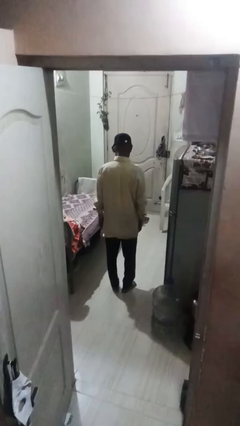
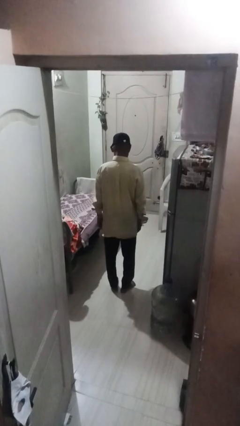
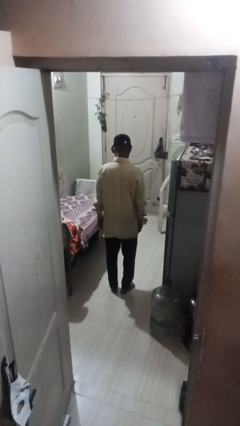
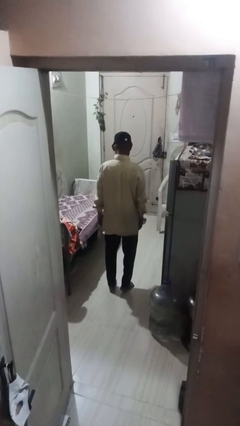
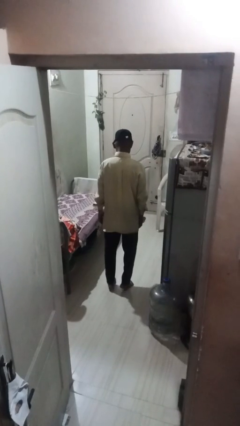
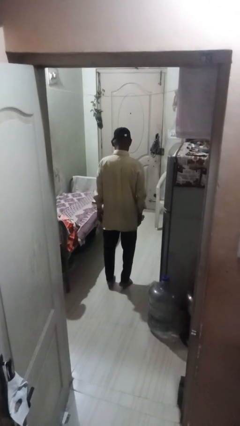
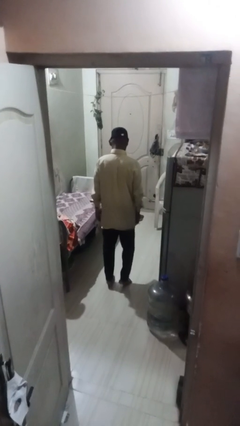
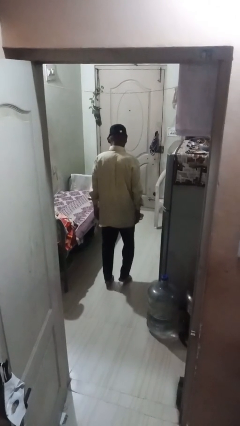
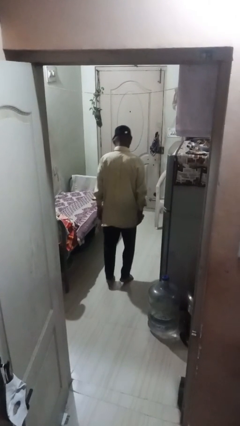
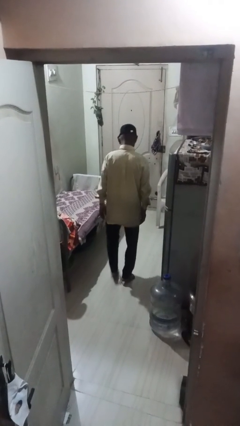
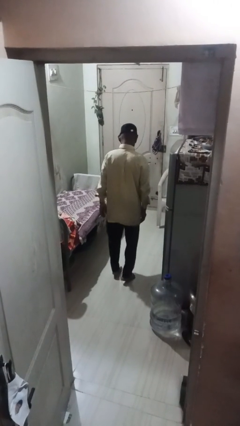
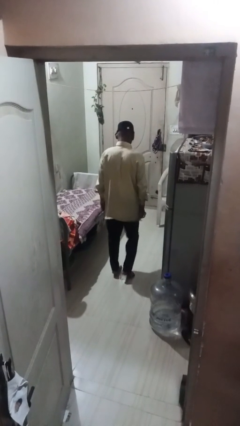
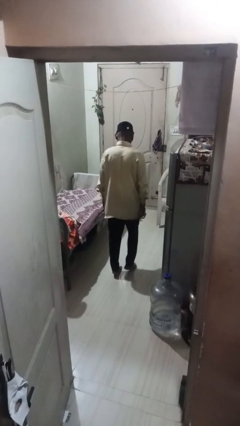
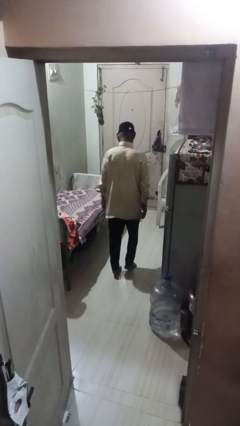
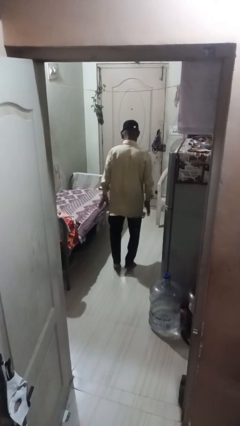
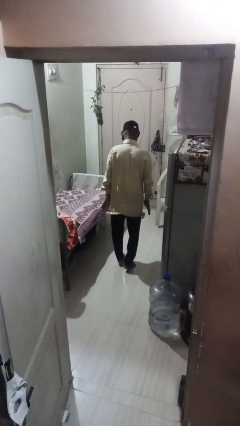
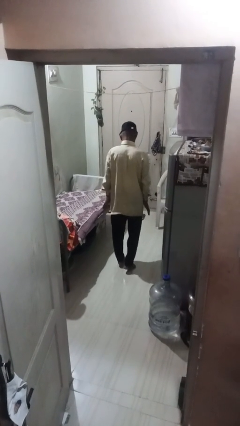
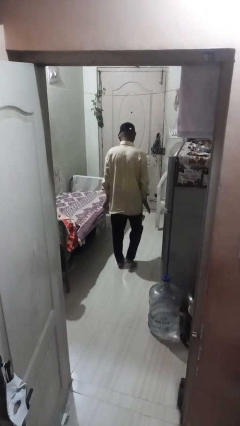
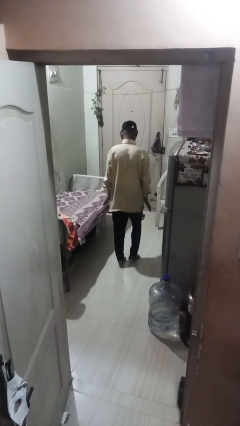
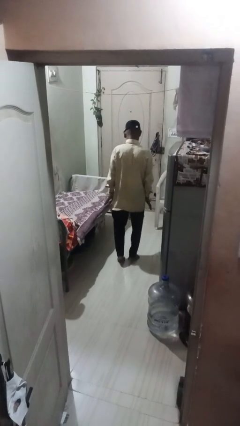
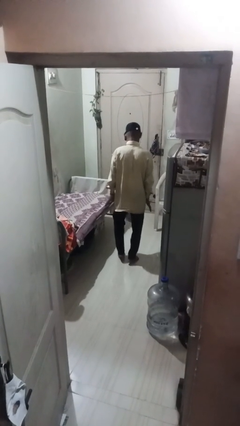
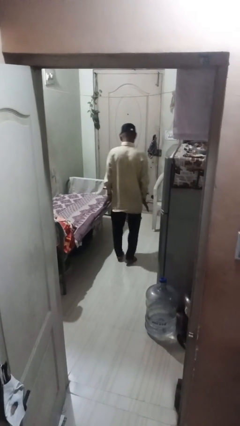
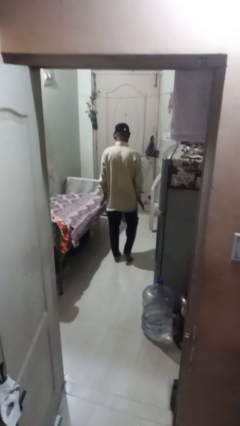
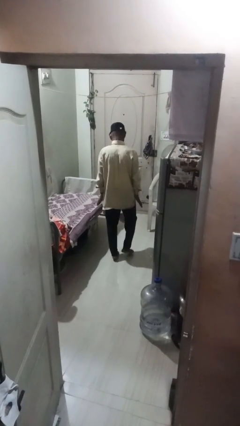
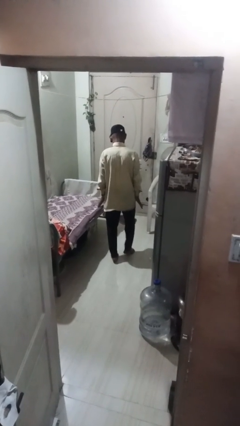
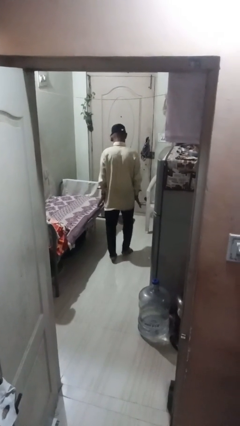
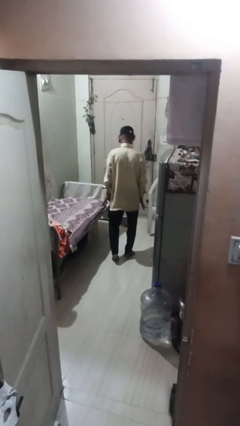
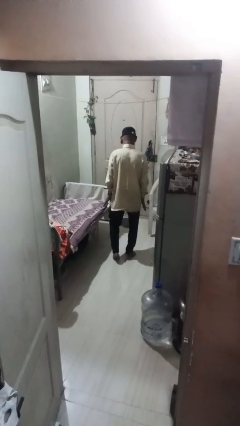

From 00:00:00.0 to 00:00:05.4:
person walks tiptoe

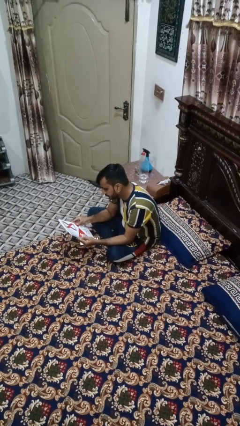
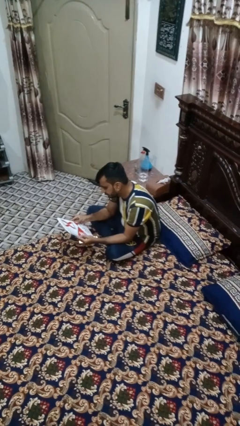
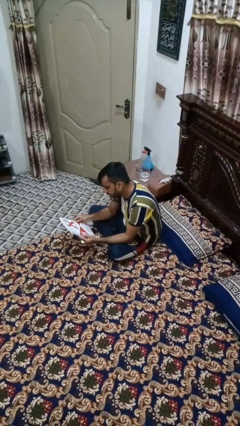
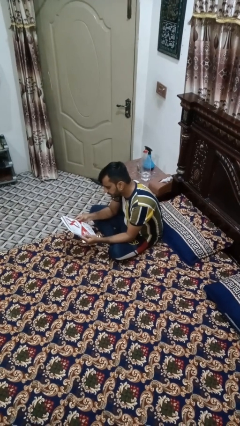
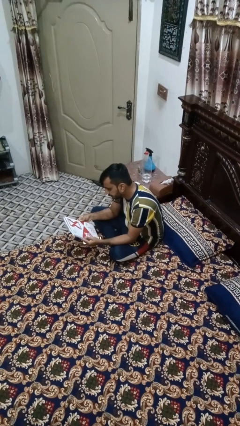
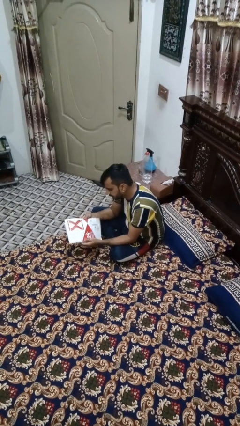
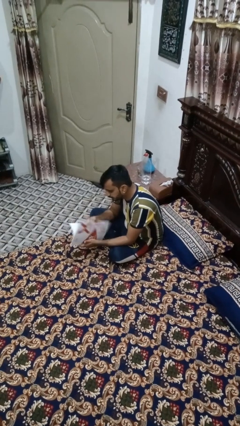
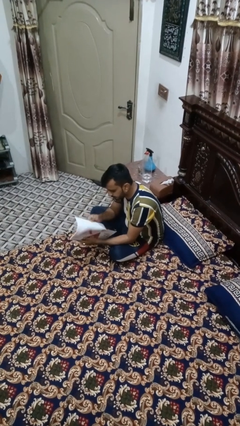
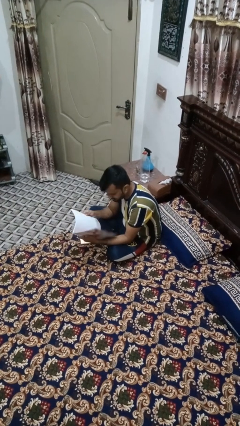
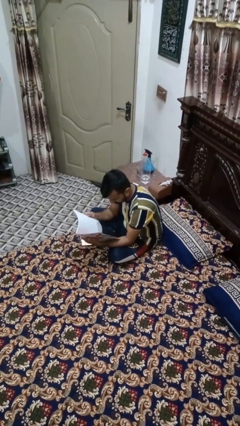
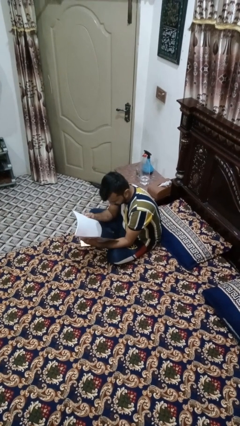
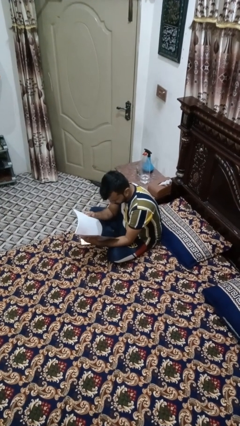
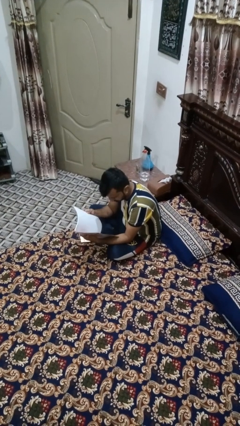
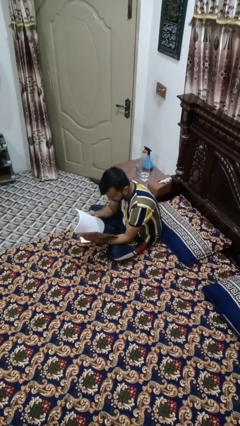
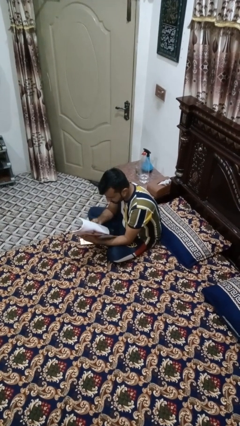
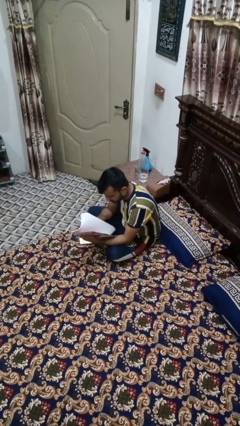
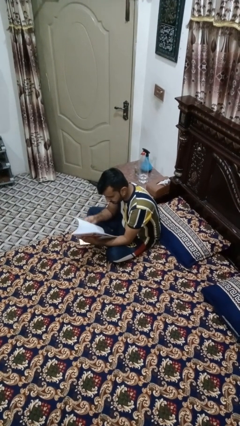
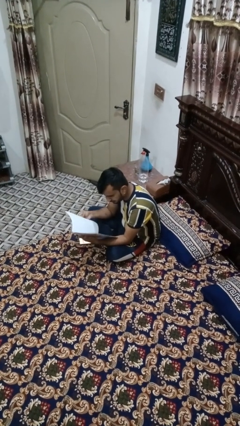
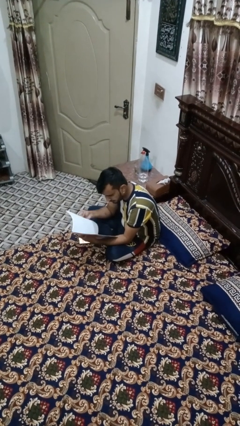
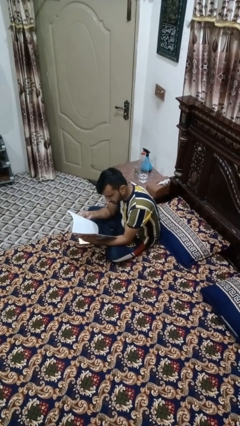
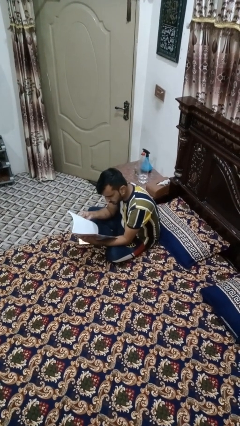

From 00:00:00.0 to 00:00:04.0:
person reads magazine

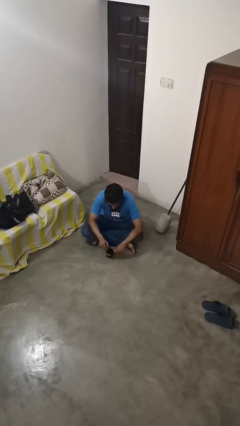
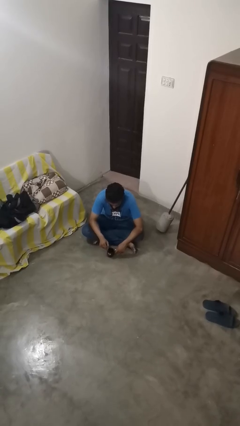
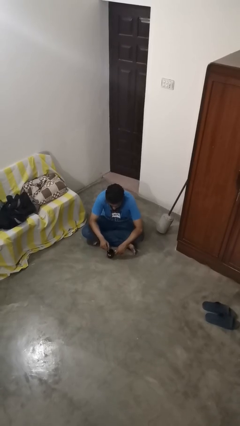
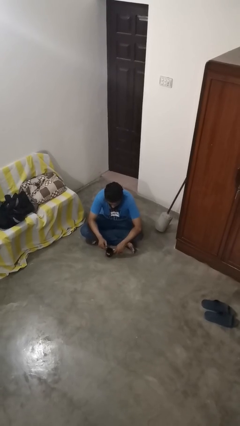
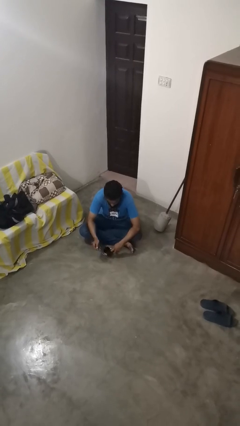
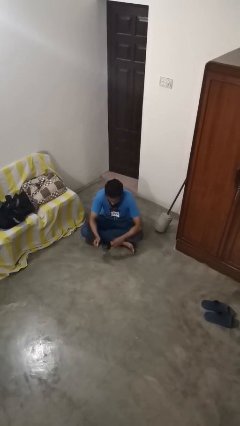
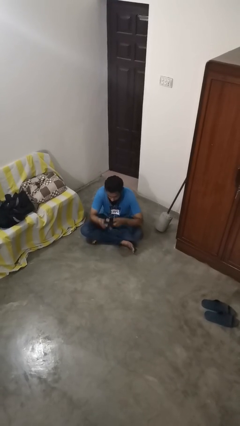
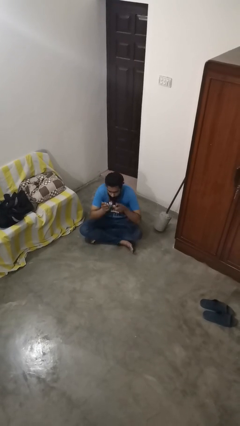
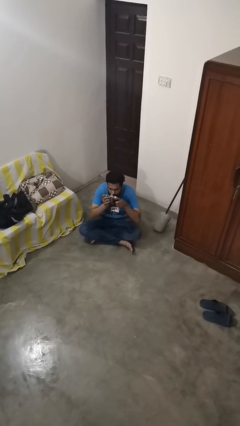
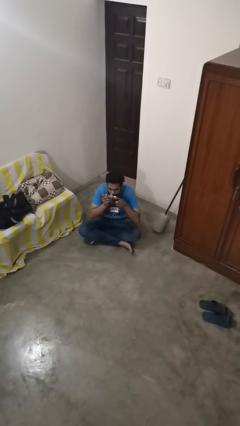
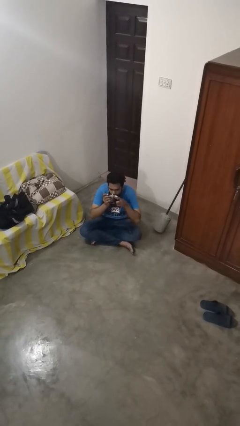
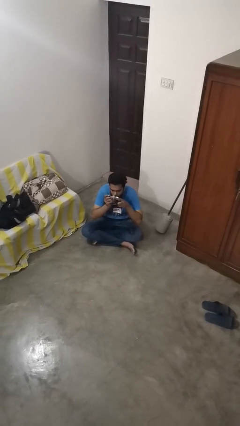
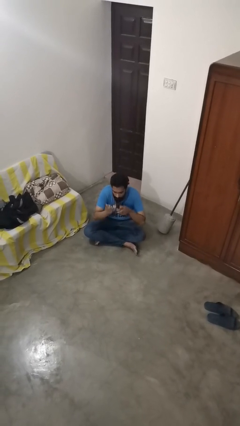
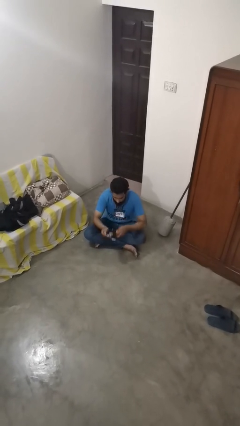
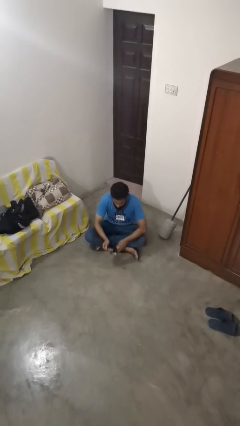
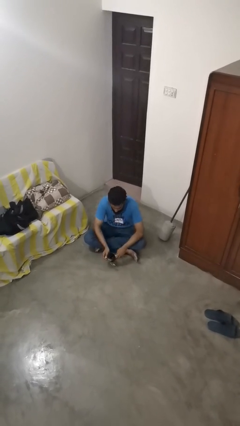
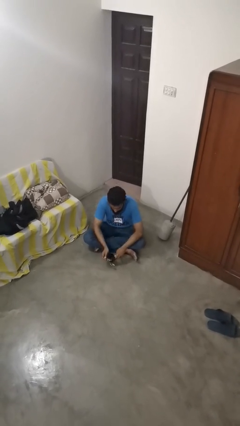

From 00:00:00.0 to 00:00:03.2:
person drinks from mug

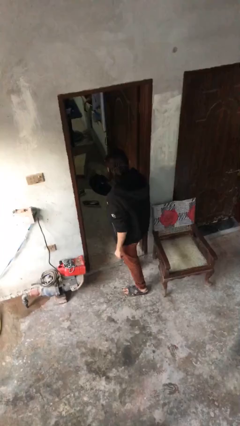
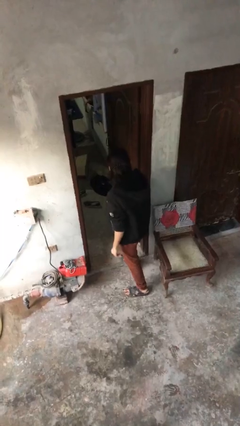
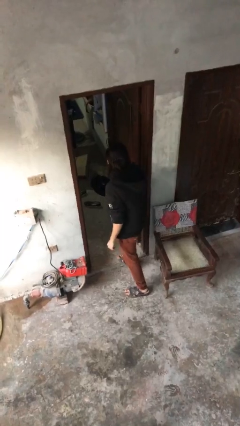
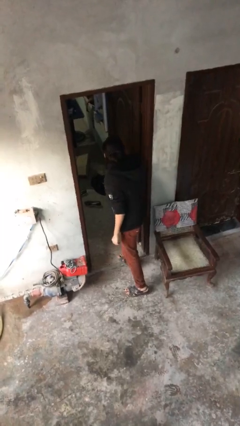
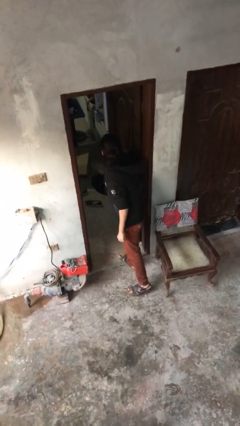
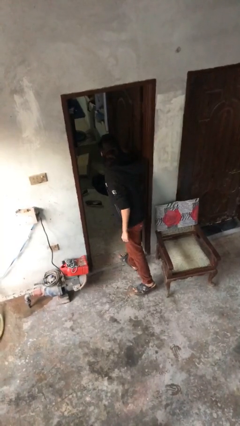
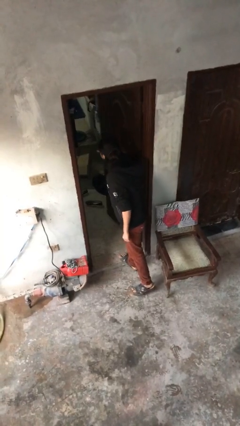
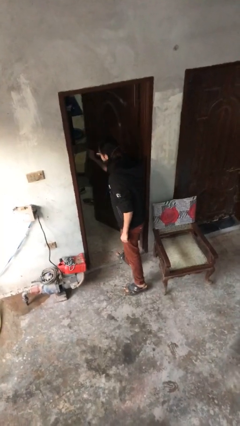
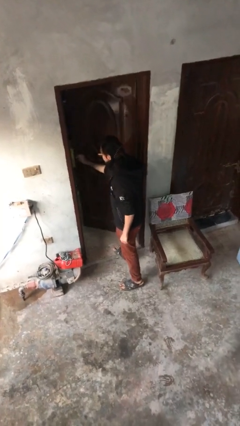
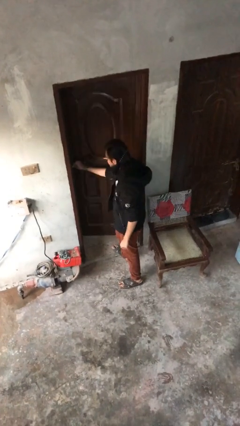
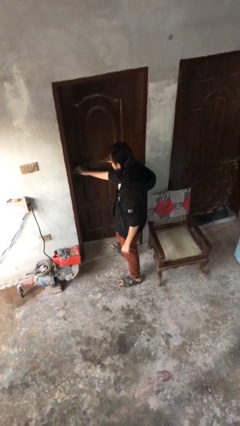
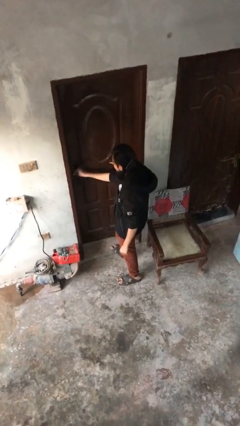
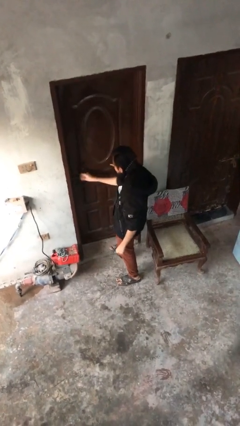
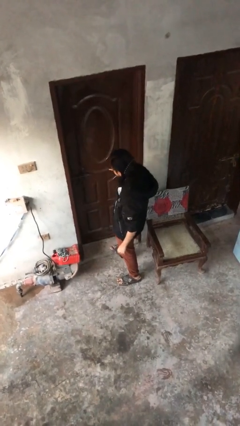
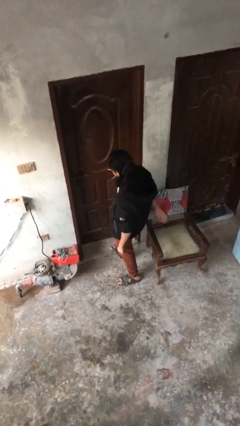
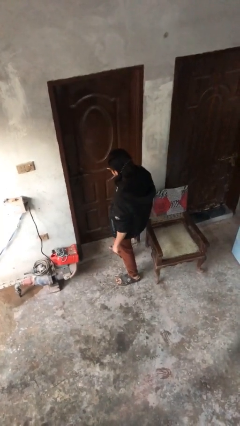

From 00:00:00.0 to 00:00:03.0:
person closes facility door

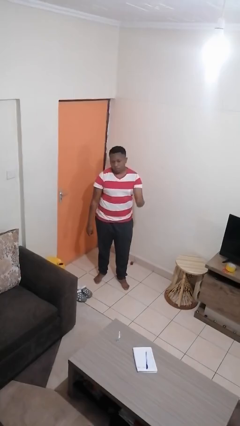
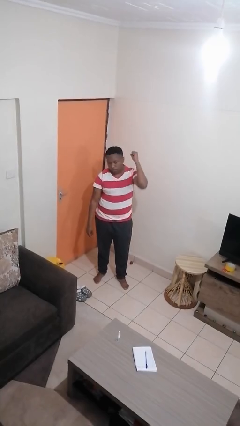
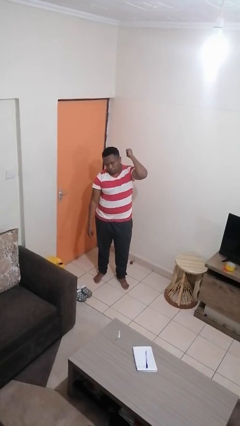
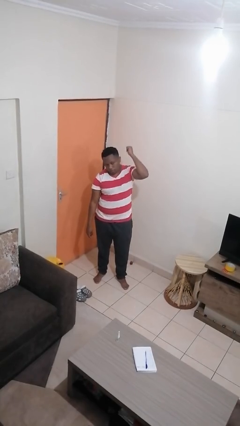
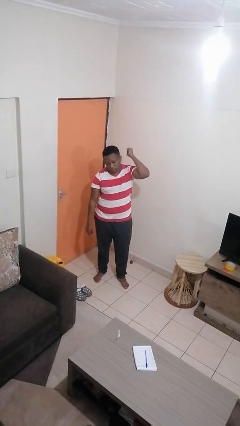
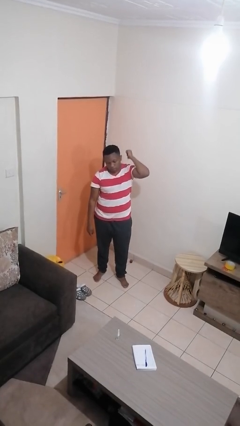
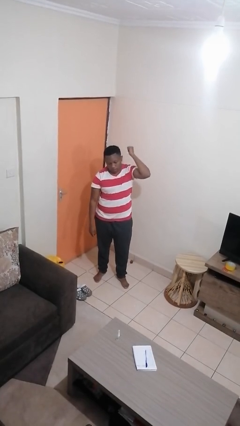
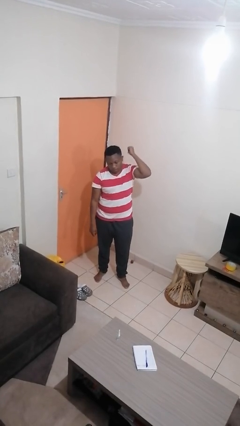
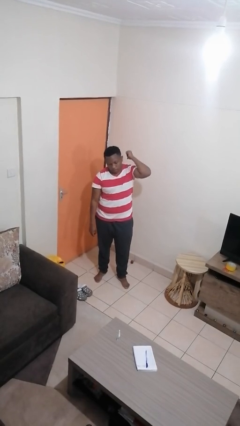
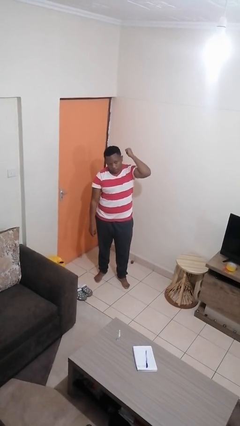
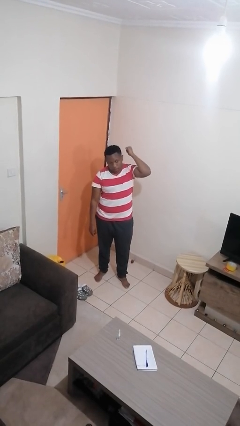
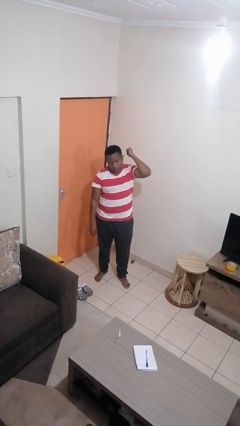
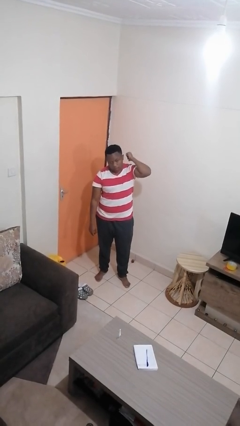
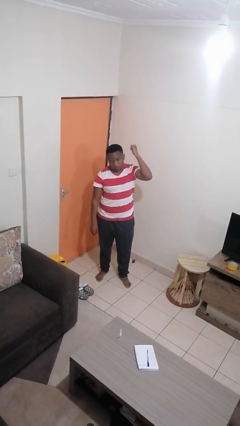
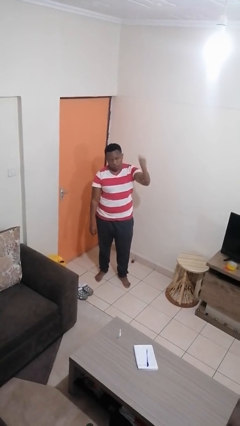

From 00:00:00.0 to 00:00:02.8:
person gestures behind me
